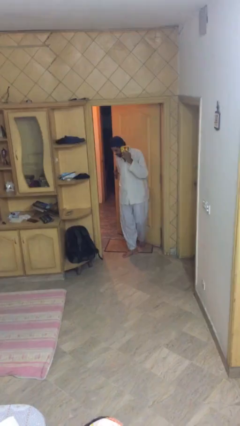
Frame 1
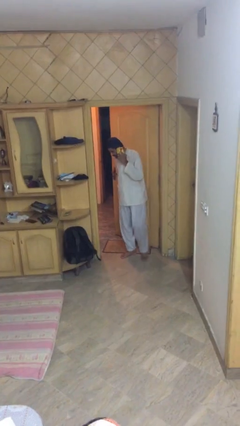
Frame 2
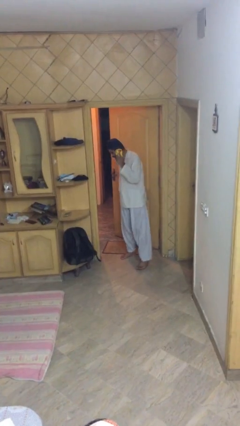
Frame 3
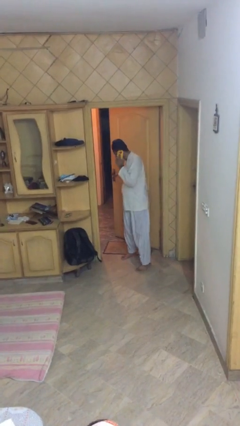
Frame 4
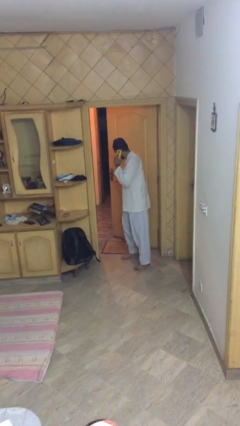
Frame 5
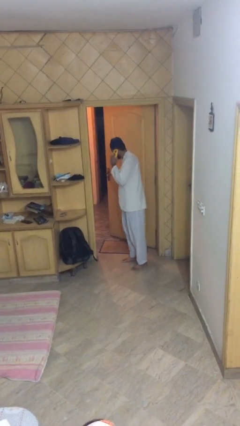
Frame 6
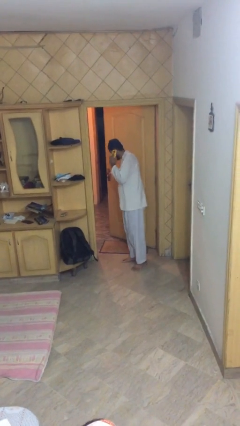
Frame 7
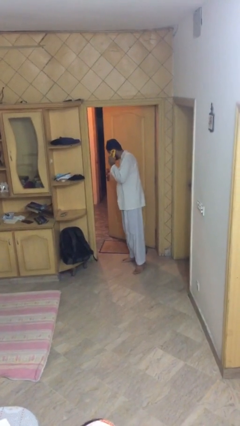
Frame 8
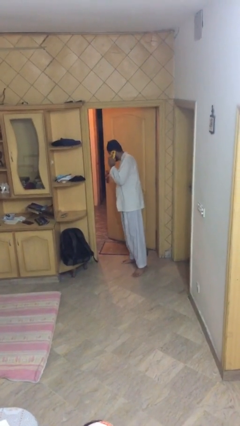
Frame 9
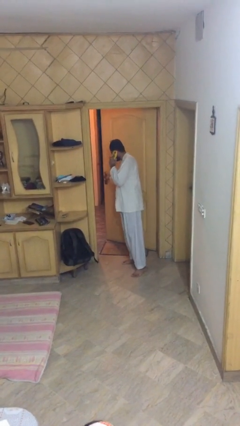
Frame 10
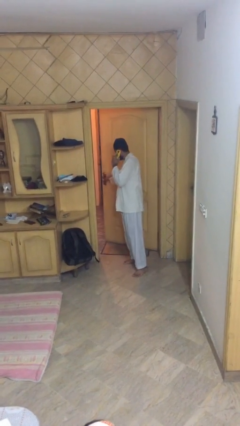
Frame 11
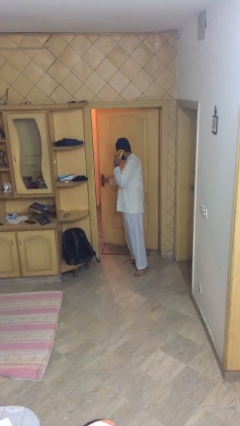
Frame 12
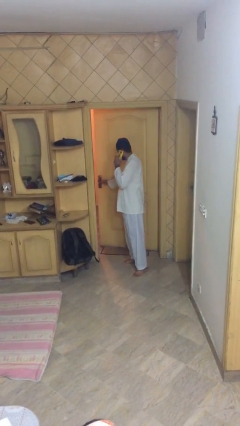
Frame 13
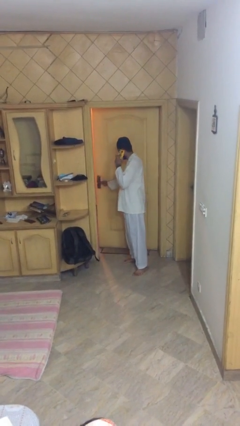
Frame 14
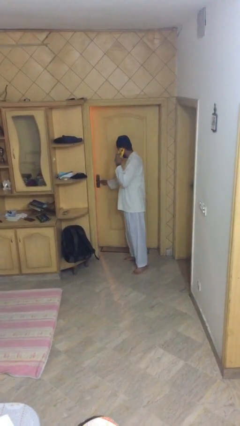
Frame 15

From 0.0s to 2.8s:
person closes facility door

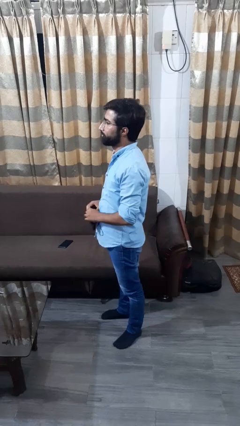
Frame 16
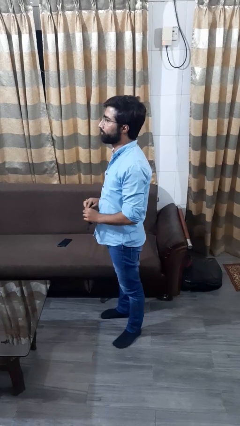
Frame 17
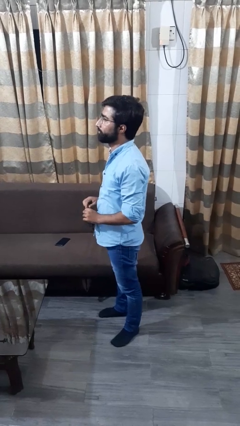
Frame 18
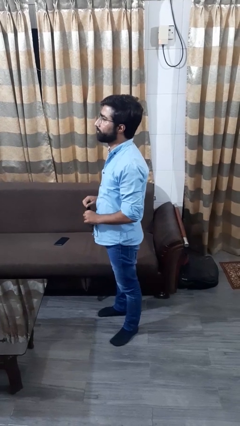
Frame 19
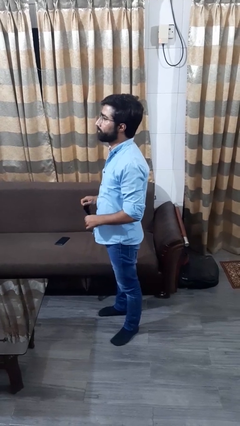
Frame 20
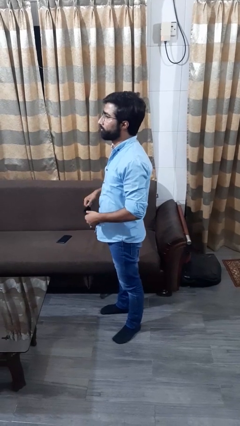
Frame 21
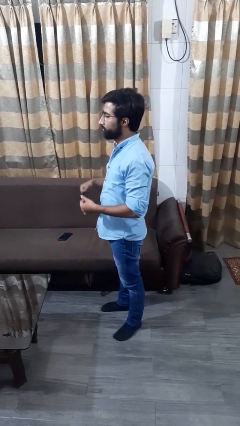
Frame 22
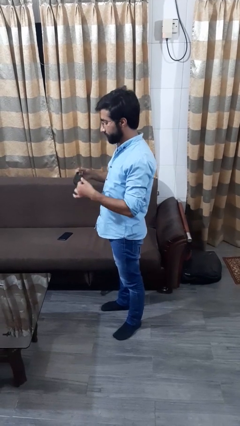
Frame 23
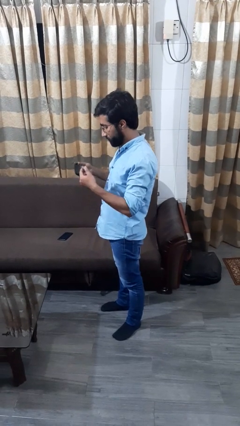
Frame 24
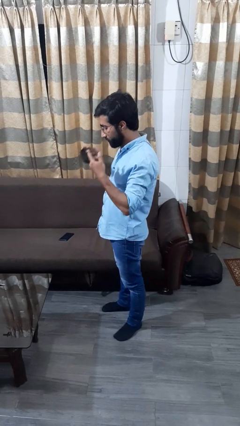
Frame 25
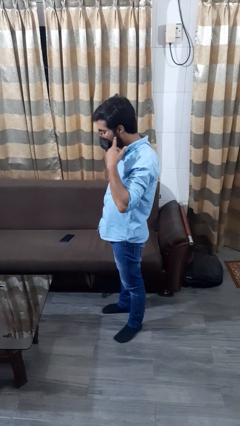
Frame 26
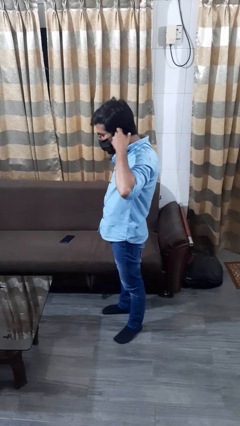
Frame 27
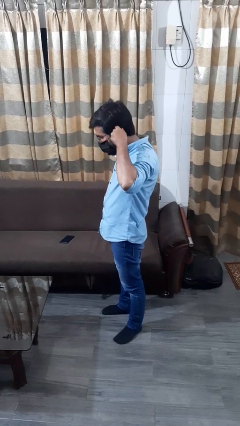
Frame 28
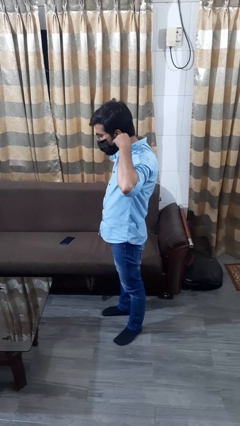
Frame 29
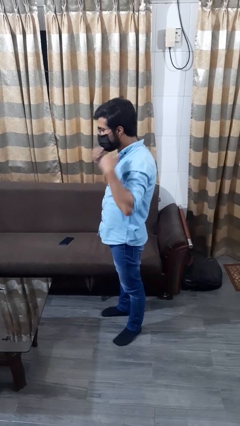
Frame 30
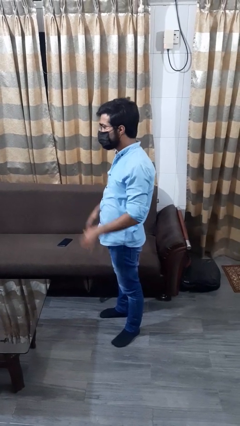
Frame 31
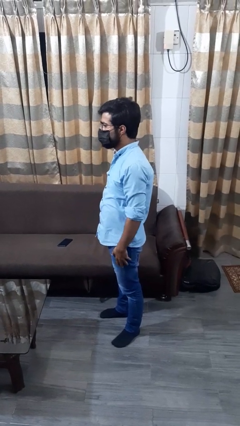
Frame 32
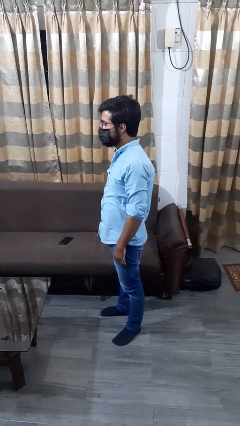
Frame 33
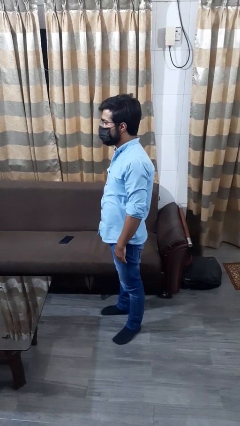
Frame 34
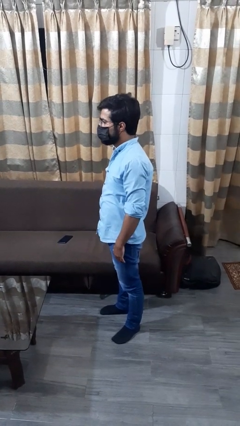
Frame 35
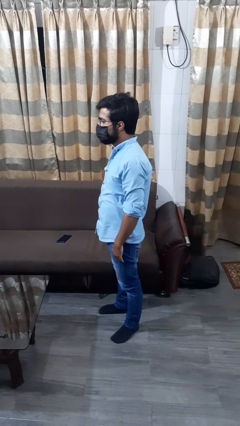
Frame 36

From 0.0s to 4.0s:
person puts on facemask

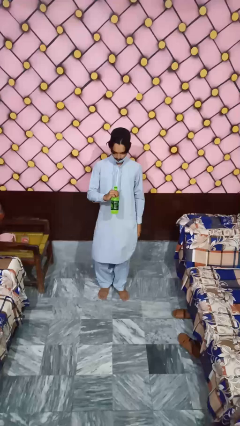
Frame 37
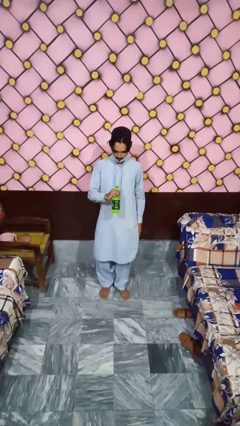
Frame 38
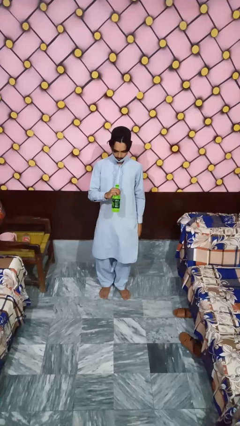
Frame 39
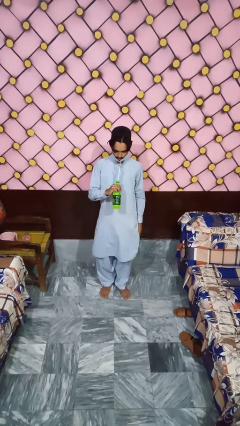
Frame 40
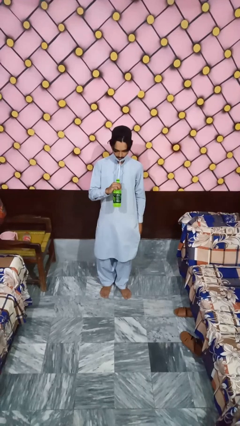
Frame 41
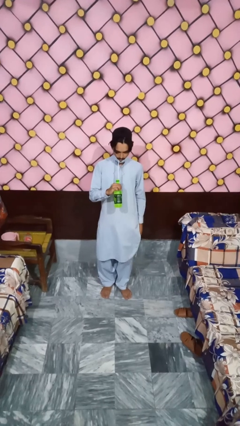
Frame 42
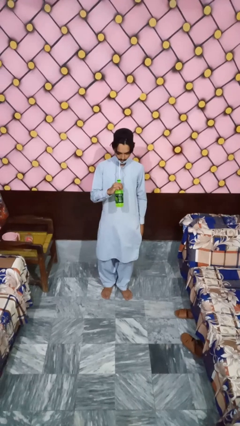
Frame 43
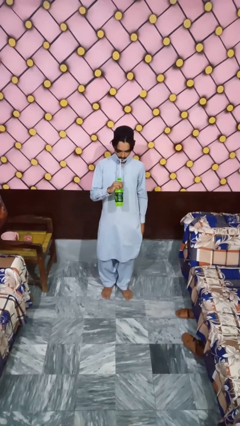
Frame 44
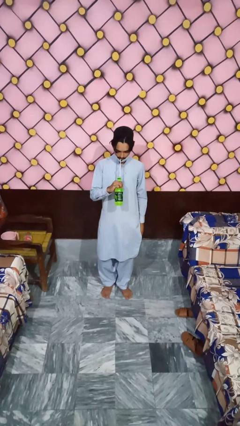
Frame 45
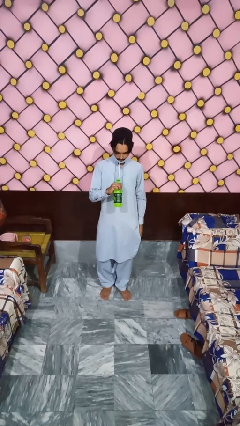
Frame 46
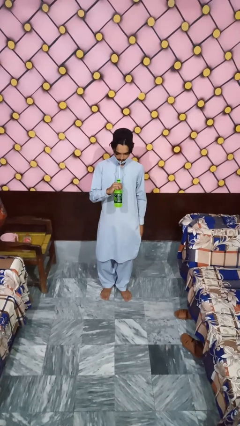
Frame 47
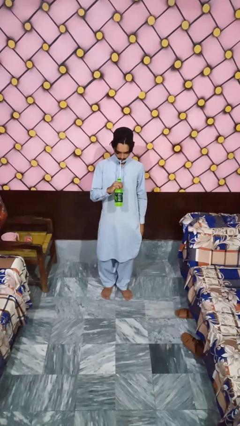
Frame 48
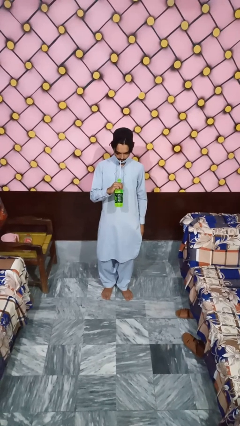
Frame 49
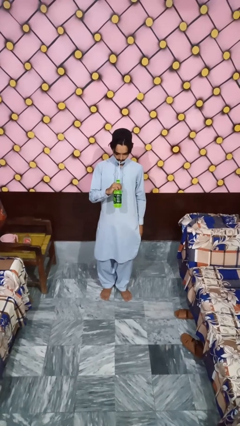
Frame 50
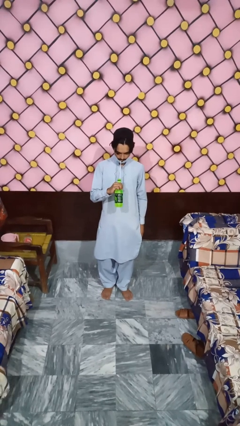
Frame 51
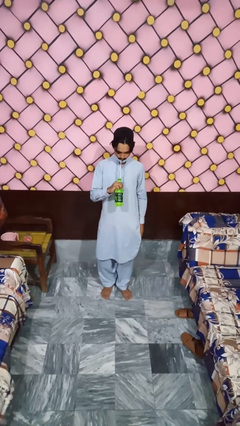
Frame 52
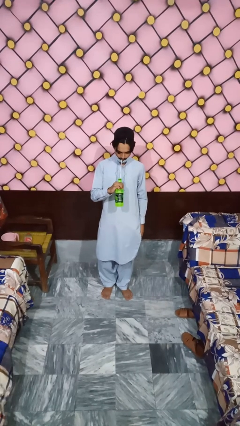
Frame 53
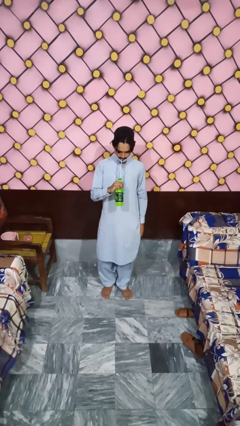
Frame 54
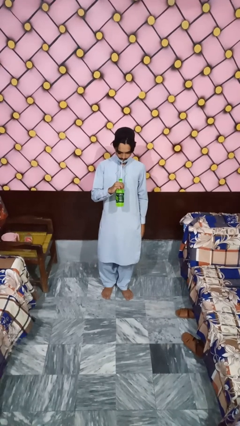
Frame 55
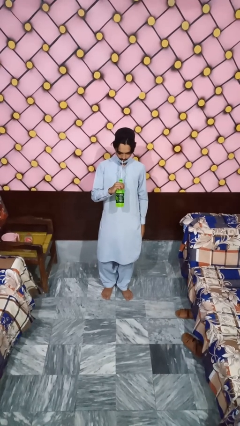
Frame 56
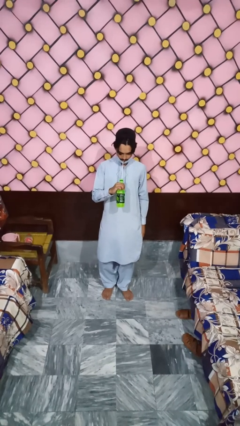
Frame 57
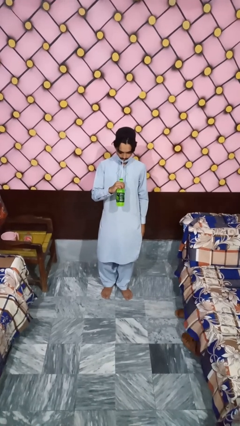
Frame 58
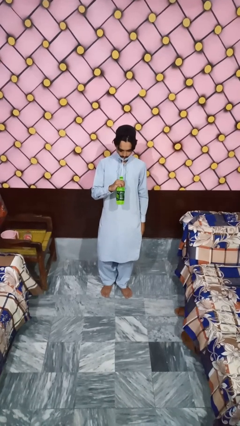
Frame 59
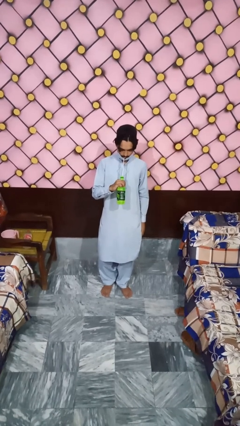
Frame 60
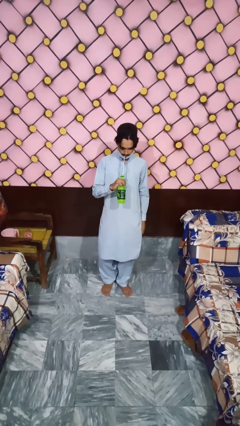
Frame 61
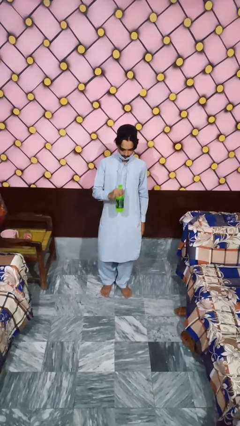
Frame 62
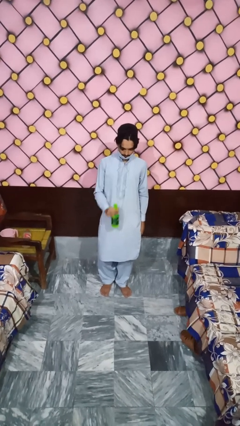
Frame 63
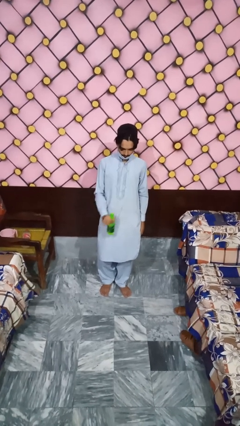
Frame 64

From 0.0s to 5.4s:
person drinks from straw

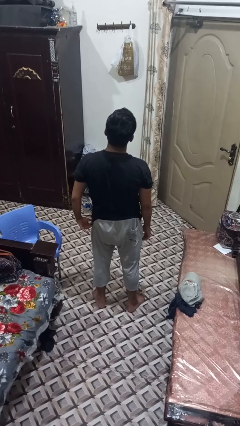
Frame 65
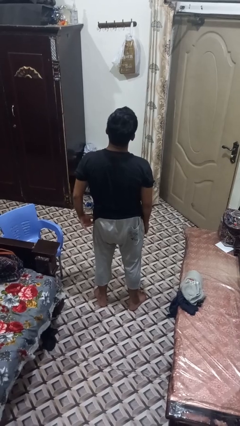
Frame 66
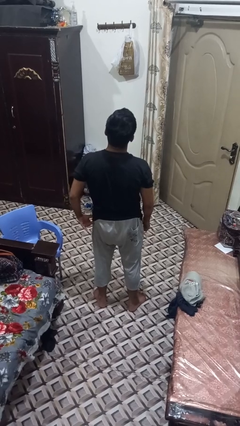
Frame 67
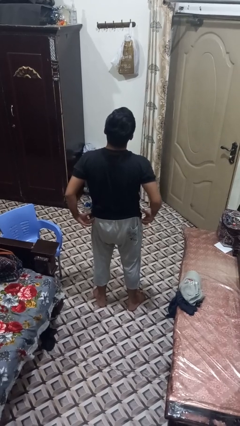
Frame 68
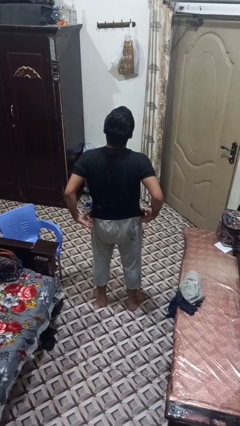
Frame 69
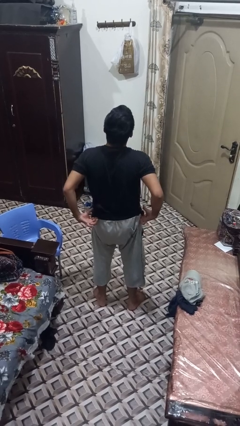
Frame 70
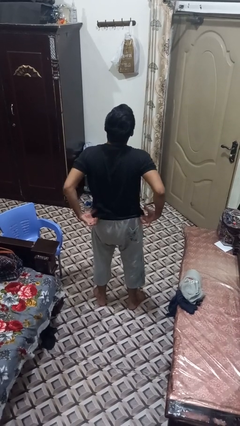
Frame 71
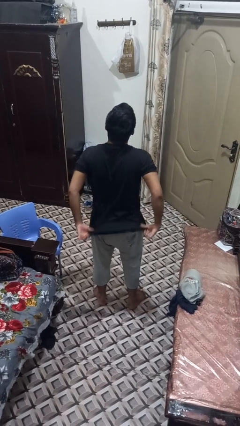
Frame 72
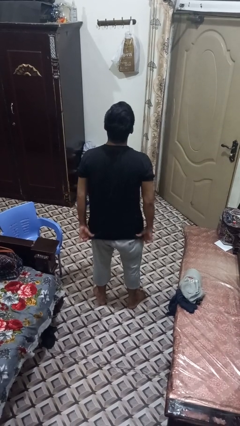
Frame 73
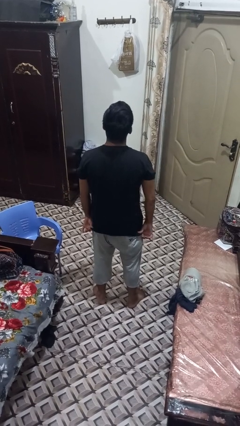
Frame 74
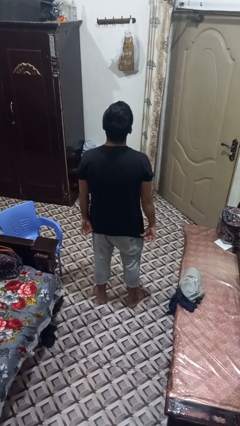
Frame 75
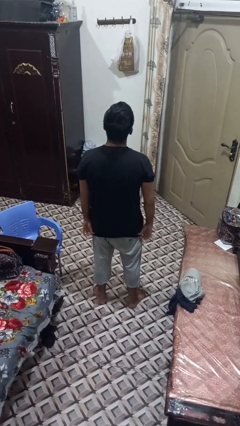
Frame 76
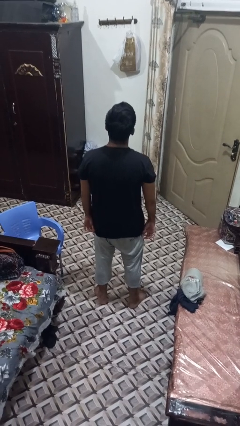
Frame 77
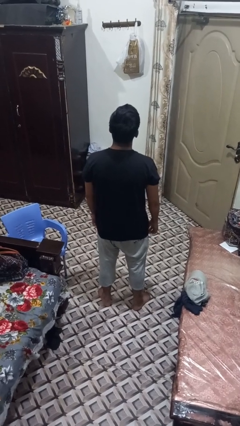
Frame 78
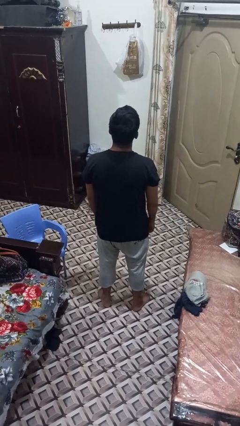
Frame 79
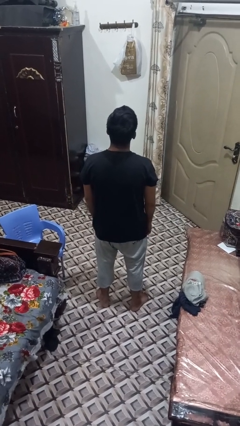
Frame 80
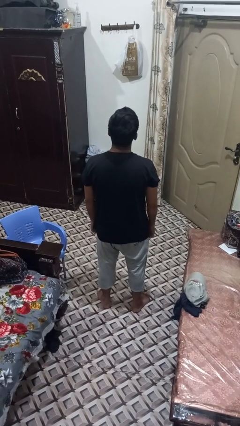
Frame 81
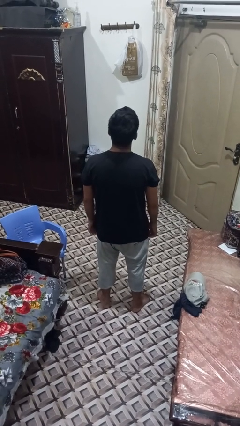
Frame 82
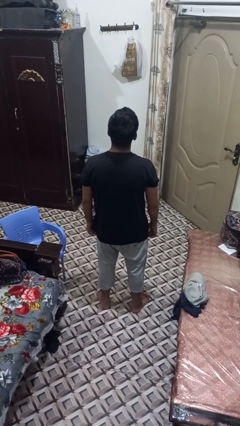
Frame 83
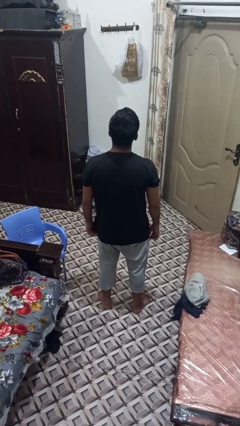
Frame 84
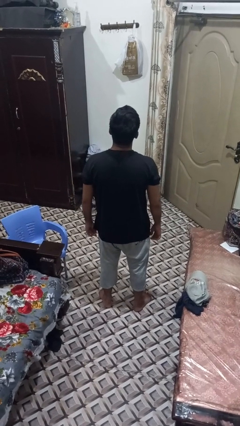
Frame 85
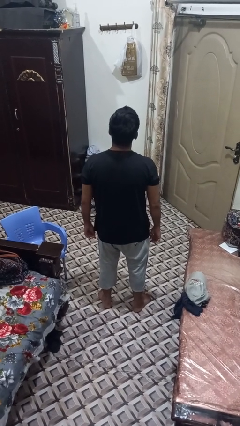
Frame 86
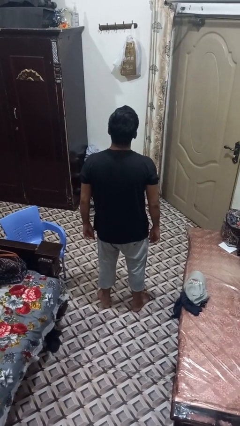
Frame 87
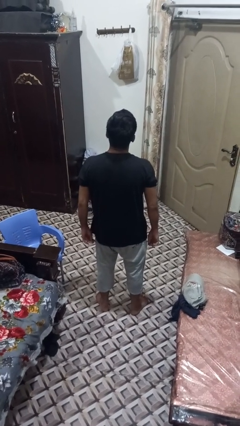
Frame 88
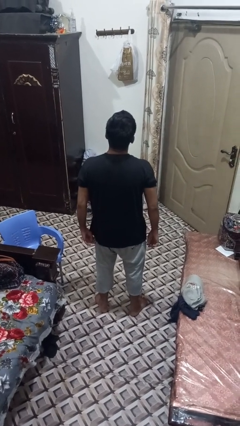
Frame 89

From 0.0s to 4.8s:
person untucks shirt

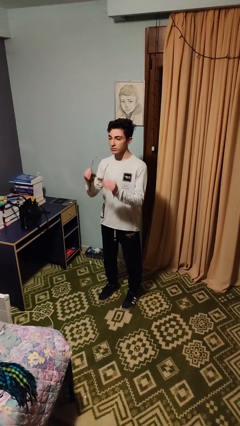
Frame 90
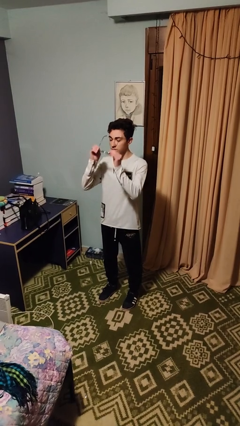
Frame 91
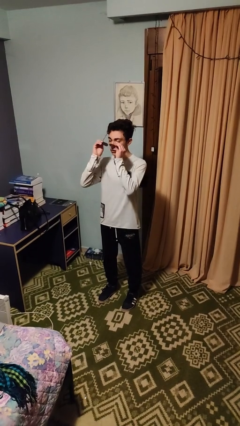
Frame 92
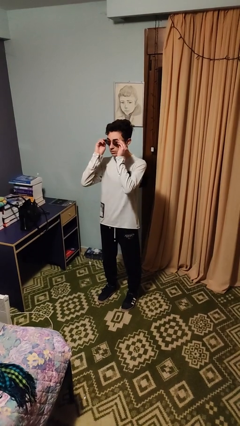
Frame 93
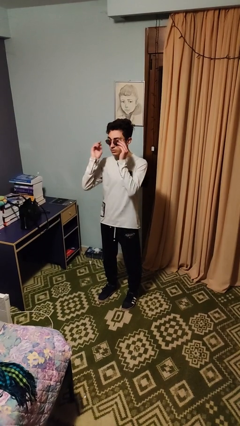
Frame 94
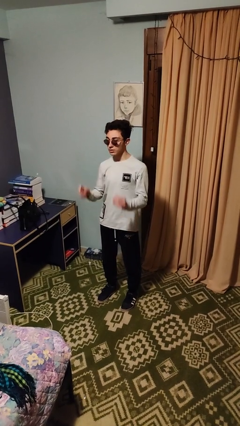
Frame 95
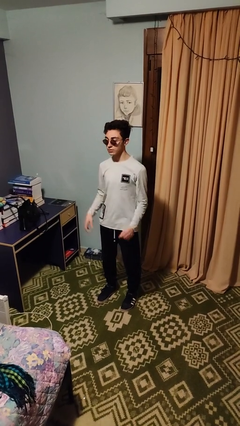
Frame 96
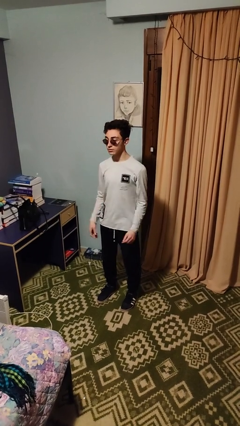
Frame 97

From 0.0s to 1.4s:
person puts on sunglasses
